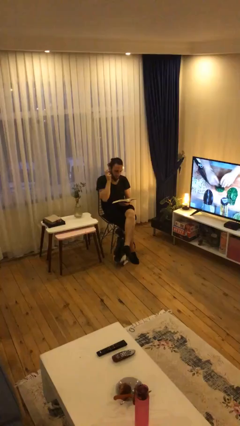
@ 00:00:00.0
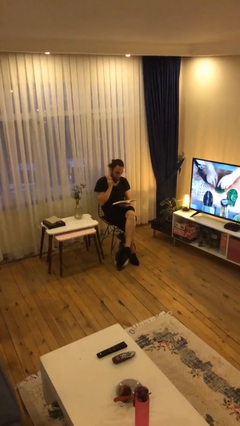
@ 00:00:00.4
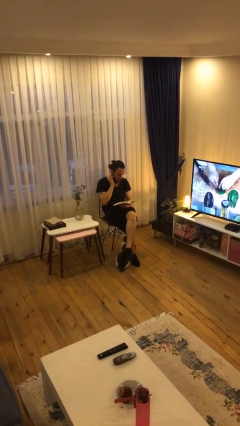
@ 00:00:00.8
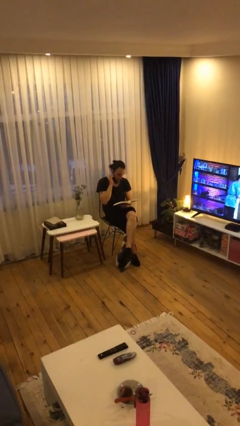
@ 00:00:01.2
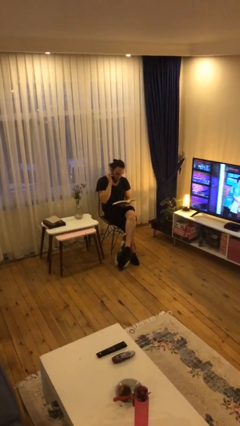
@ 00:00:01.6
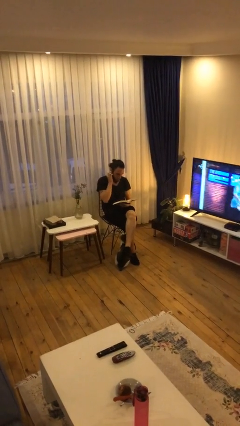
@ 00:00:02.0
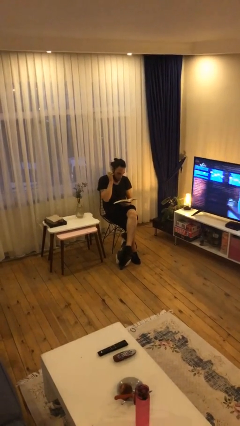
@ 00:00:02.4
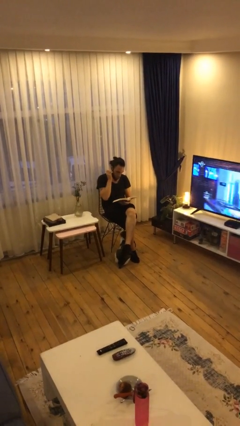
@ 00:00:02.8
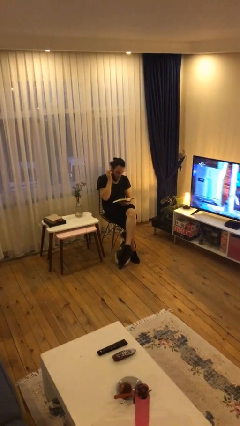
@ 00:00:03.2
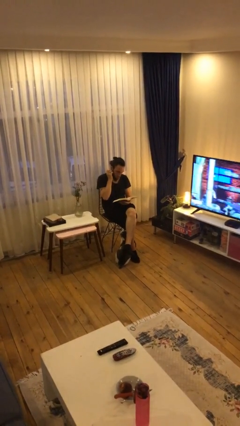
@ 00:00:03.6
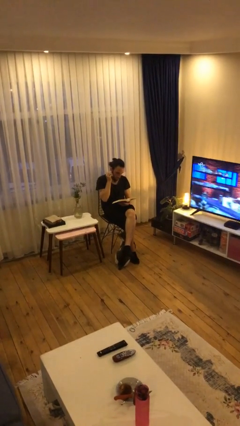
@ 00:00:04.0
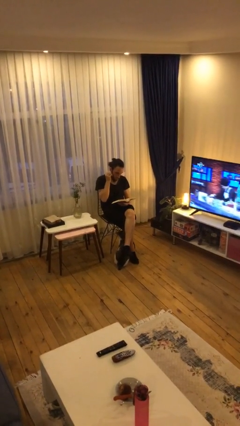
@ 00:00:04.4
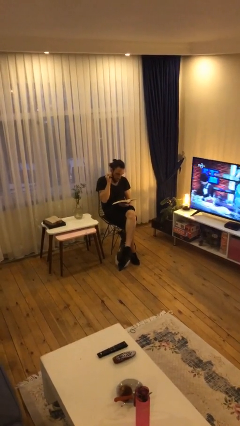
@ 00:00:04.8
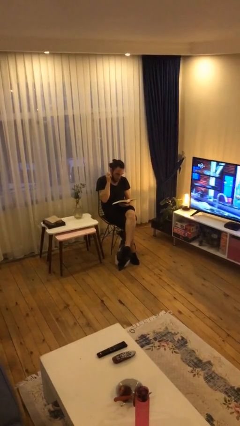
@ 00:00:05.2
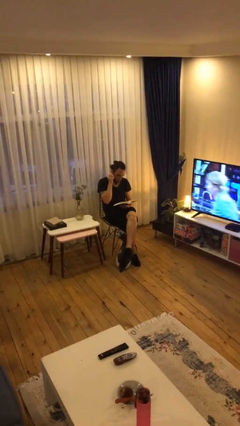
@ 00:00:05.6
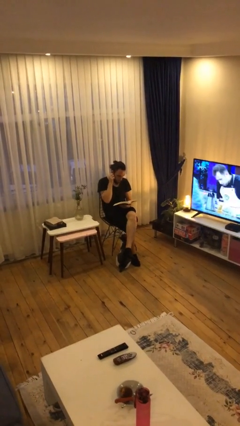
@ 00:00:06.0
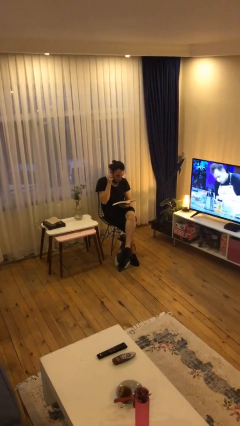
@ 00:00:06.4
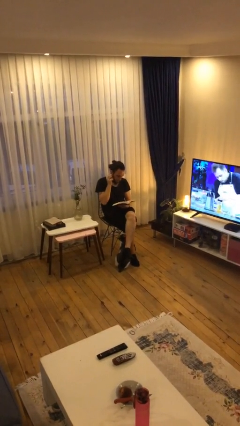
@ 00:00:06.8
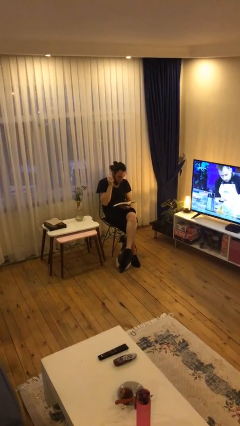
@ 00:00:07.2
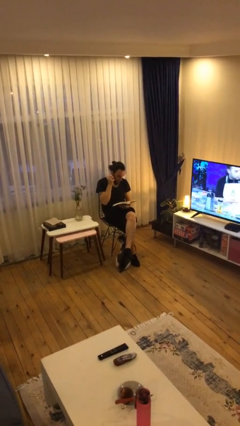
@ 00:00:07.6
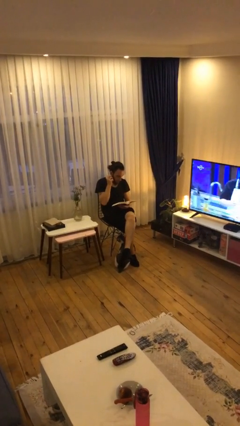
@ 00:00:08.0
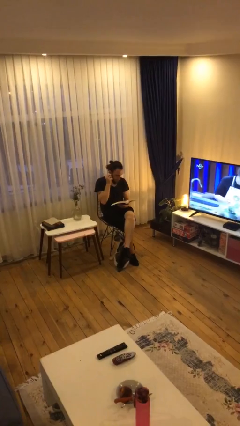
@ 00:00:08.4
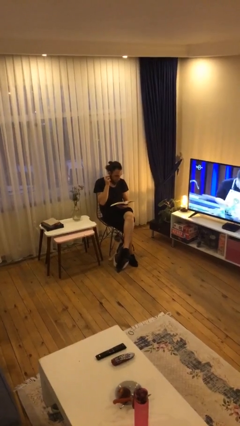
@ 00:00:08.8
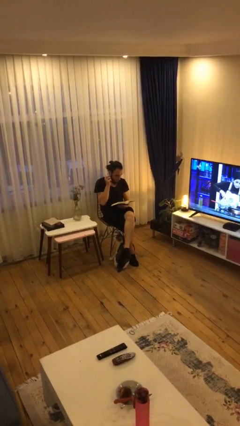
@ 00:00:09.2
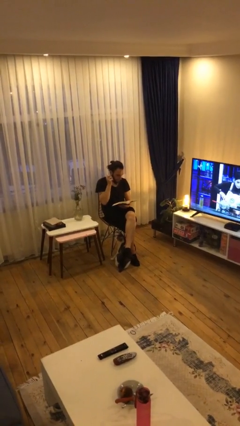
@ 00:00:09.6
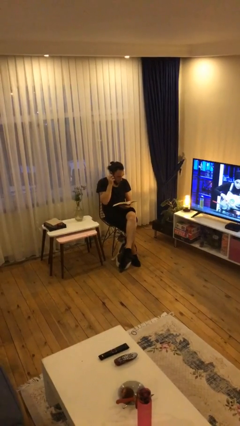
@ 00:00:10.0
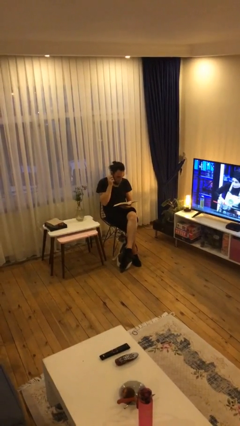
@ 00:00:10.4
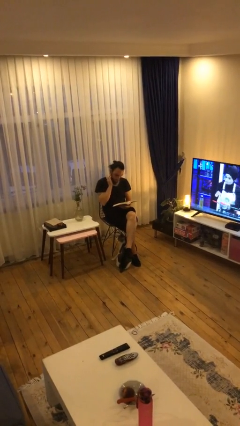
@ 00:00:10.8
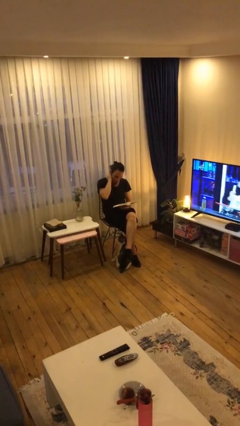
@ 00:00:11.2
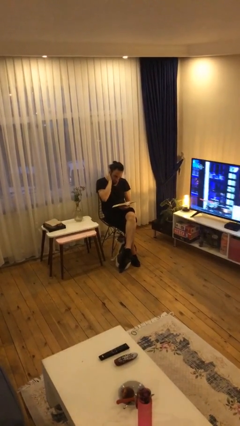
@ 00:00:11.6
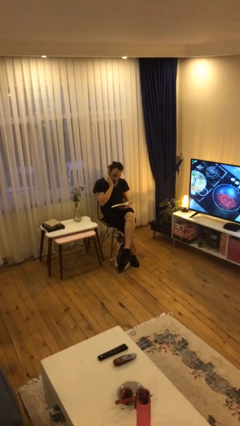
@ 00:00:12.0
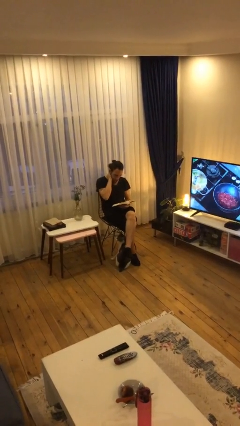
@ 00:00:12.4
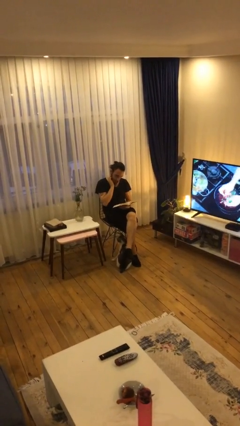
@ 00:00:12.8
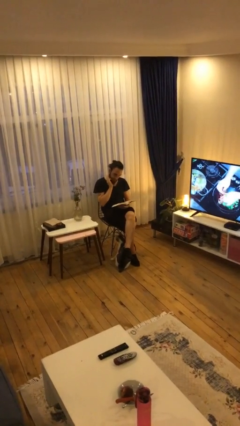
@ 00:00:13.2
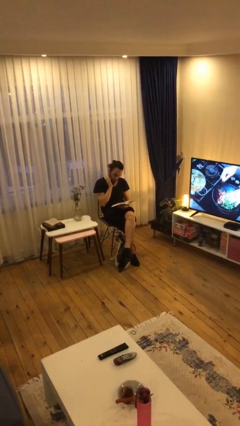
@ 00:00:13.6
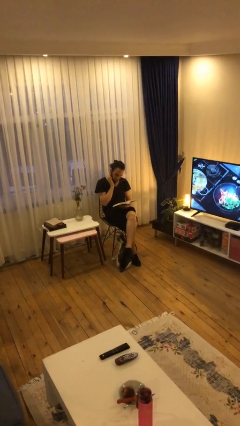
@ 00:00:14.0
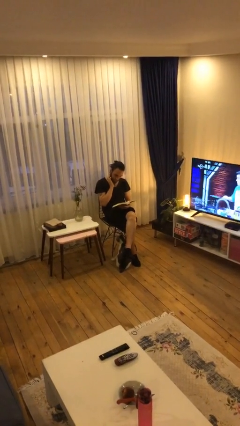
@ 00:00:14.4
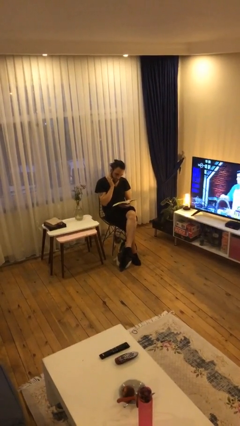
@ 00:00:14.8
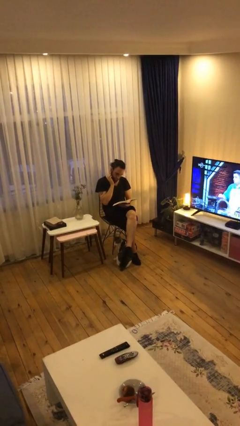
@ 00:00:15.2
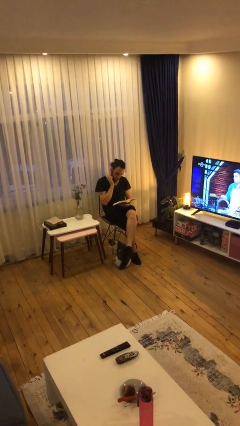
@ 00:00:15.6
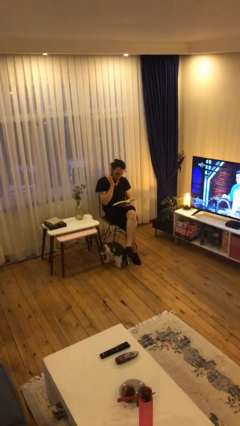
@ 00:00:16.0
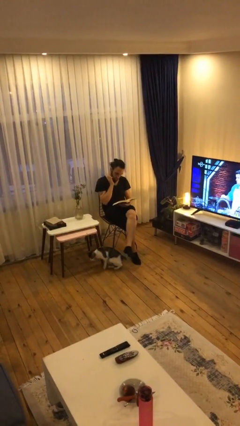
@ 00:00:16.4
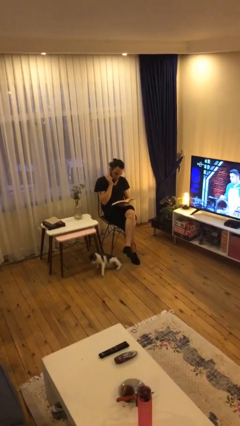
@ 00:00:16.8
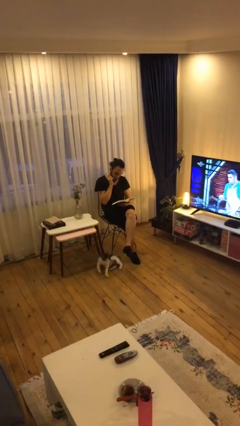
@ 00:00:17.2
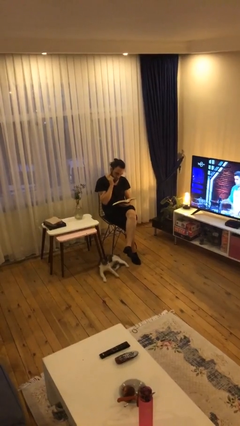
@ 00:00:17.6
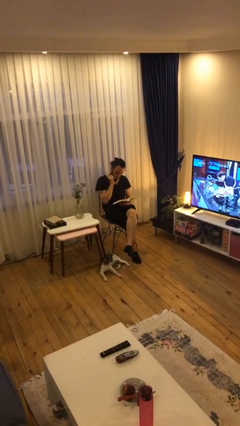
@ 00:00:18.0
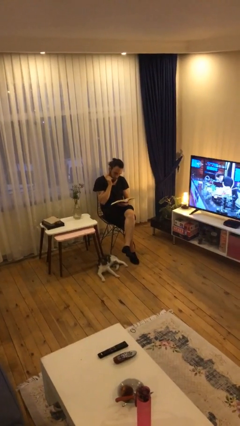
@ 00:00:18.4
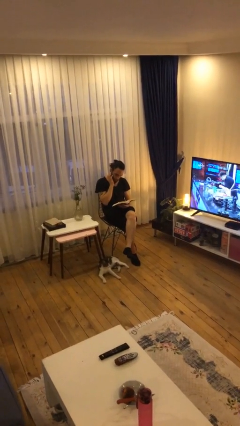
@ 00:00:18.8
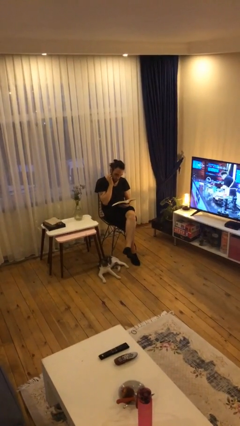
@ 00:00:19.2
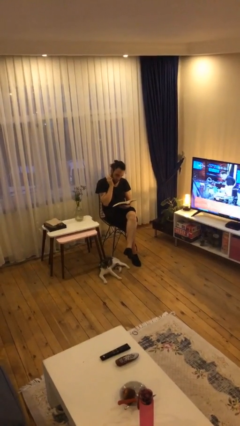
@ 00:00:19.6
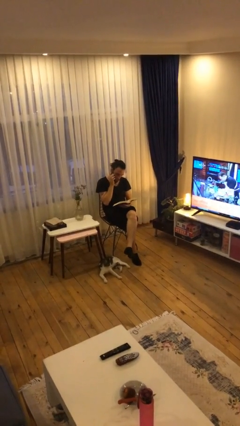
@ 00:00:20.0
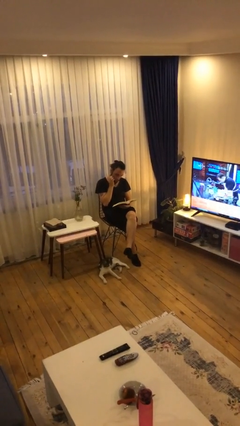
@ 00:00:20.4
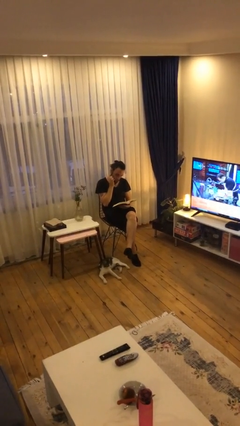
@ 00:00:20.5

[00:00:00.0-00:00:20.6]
person reads document

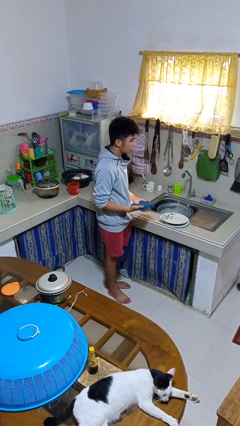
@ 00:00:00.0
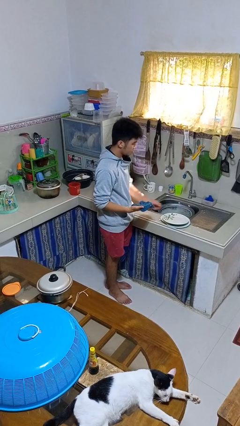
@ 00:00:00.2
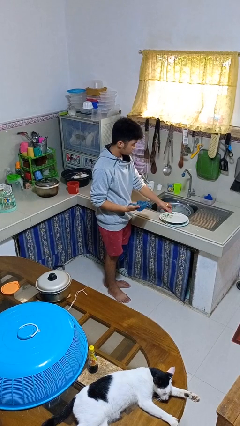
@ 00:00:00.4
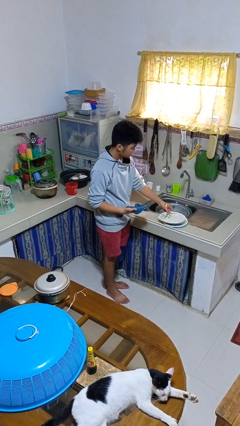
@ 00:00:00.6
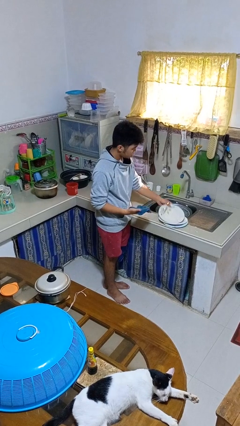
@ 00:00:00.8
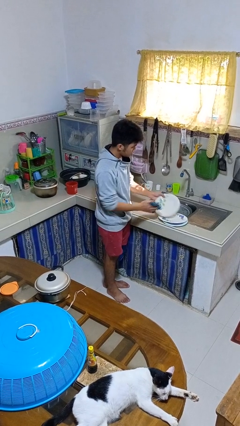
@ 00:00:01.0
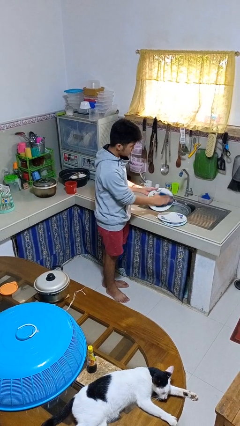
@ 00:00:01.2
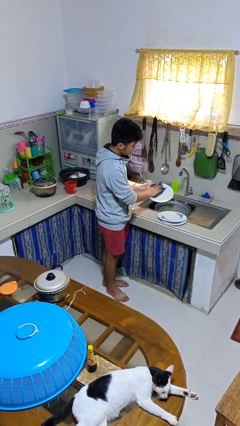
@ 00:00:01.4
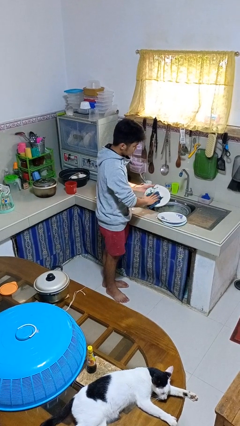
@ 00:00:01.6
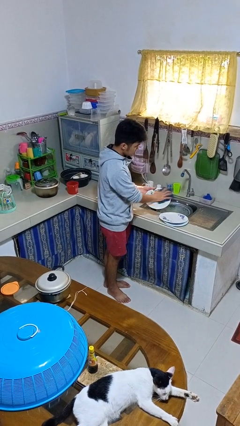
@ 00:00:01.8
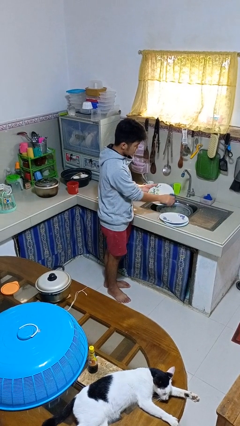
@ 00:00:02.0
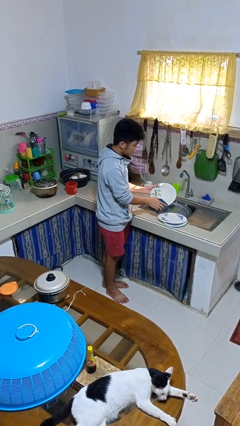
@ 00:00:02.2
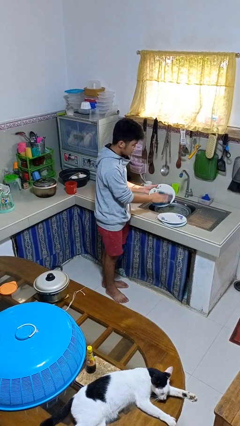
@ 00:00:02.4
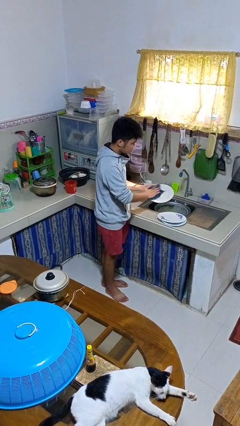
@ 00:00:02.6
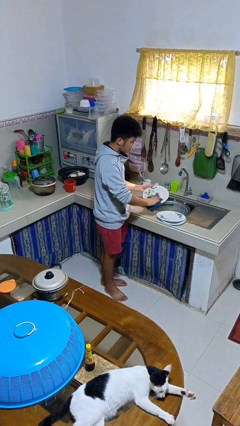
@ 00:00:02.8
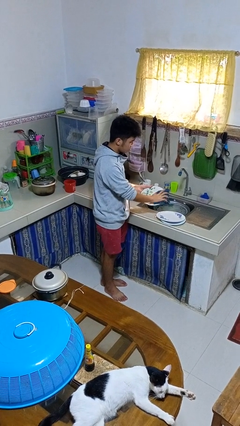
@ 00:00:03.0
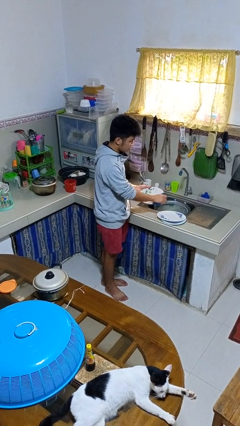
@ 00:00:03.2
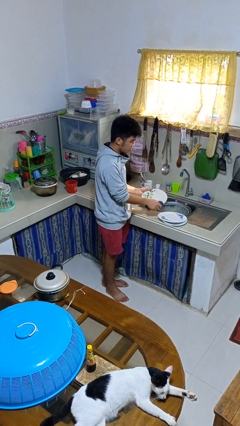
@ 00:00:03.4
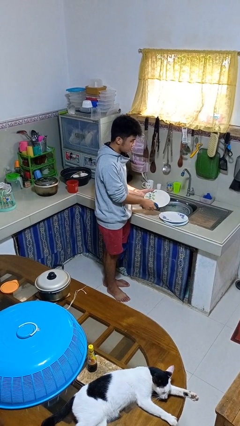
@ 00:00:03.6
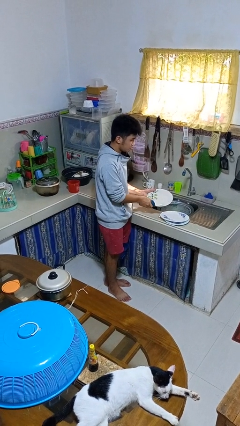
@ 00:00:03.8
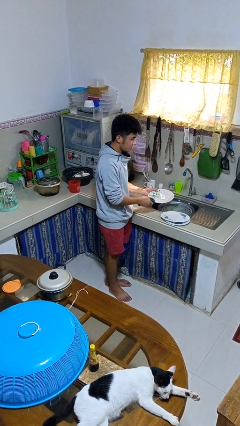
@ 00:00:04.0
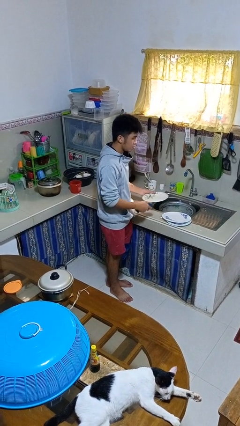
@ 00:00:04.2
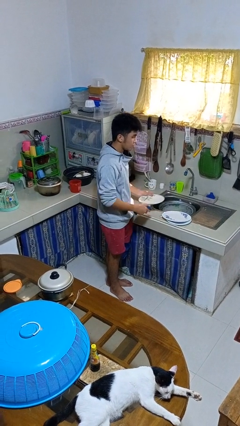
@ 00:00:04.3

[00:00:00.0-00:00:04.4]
person dries dish

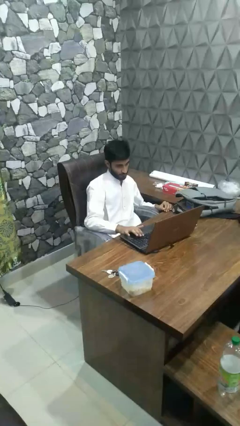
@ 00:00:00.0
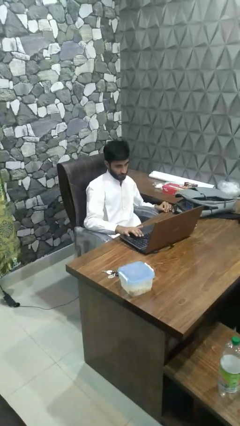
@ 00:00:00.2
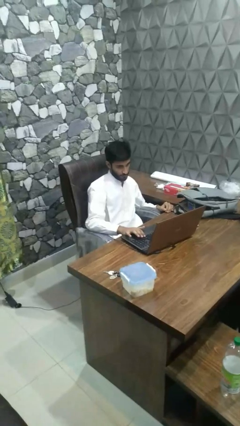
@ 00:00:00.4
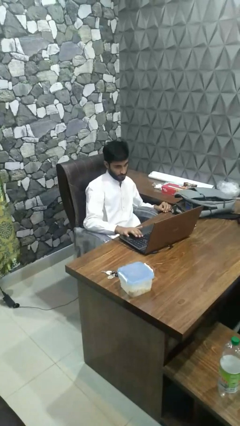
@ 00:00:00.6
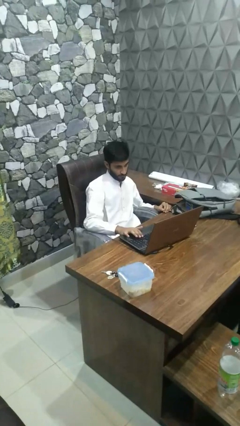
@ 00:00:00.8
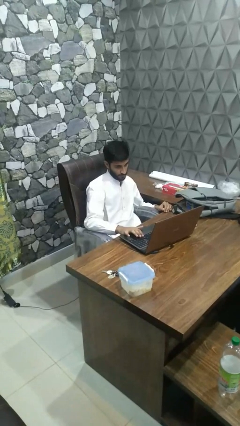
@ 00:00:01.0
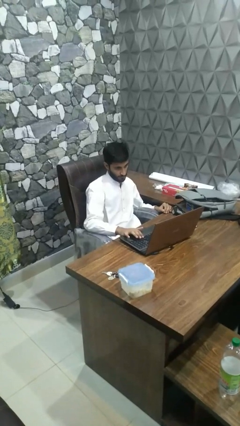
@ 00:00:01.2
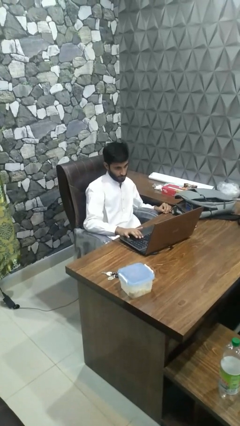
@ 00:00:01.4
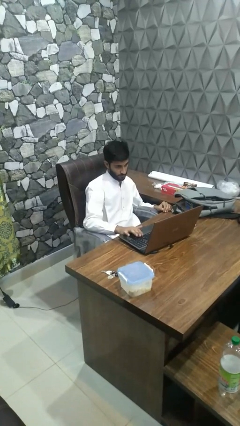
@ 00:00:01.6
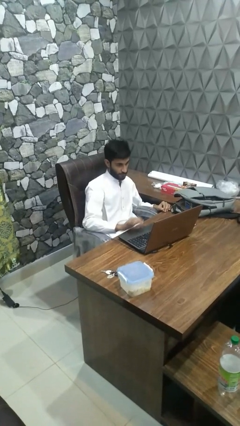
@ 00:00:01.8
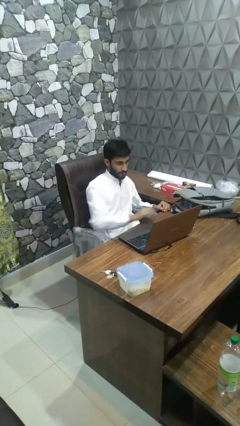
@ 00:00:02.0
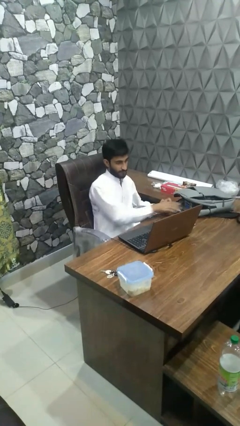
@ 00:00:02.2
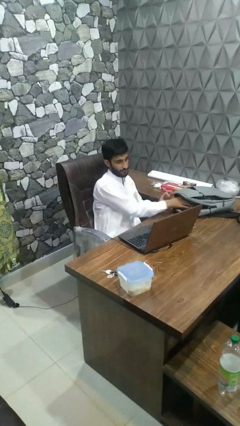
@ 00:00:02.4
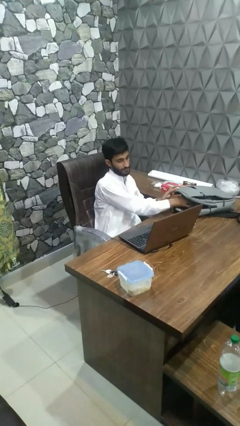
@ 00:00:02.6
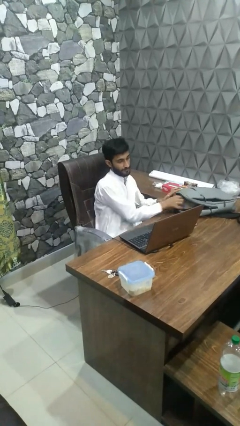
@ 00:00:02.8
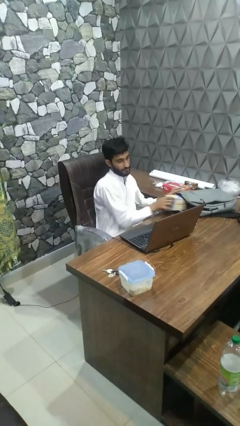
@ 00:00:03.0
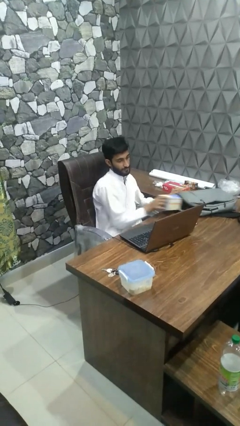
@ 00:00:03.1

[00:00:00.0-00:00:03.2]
person takes object from bag
